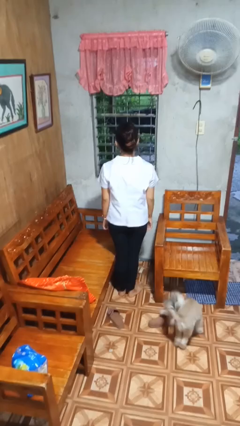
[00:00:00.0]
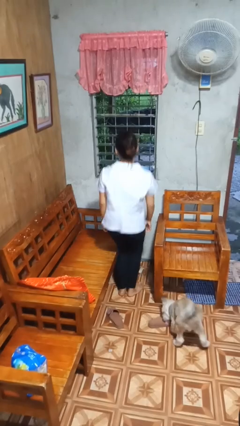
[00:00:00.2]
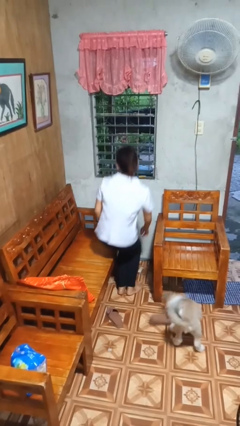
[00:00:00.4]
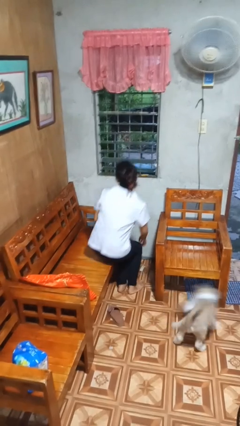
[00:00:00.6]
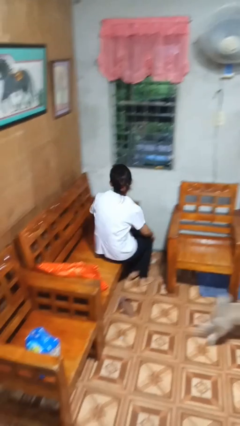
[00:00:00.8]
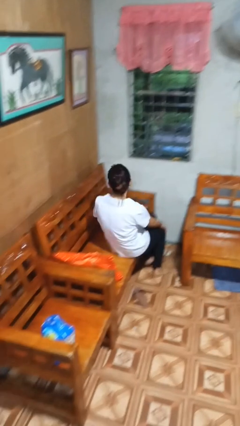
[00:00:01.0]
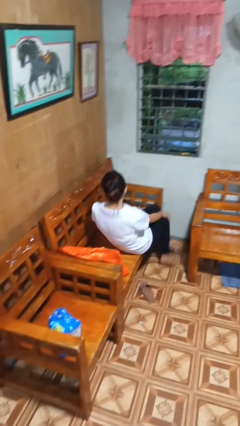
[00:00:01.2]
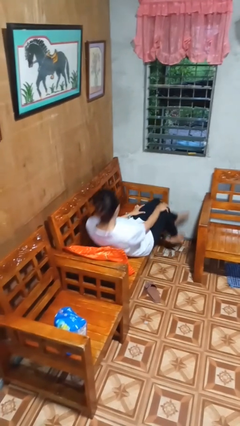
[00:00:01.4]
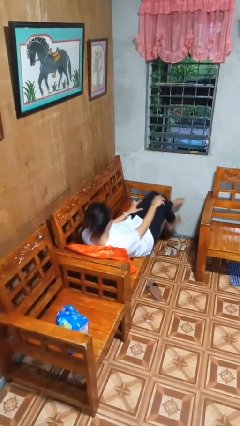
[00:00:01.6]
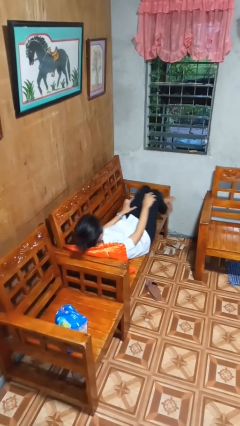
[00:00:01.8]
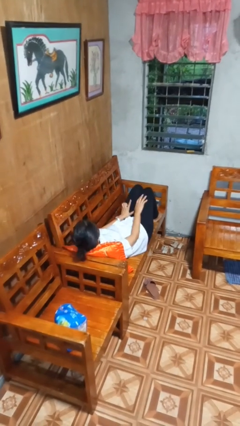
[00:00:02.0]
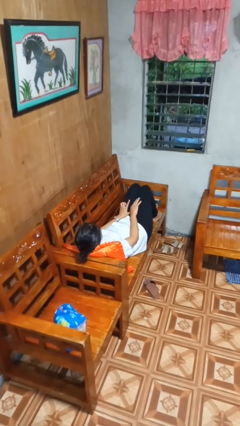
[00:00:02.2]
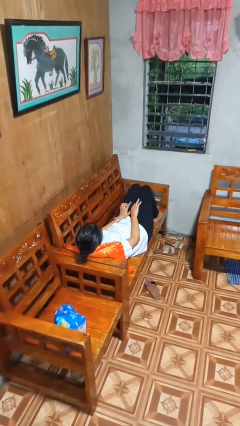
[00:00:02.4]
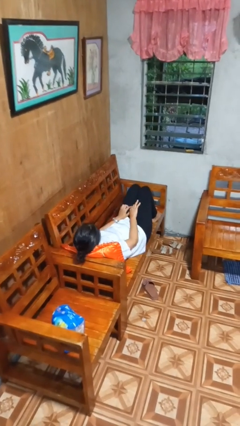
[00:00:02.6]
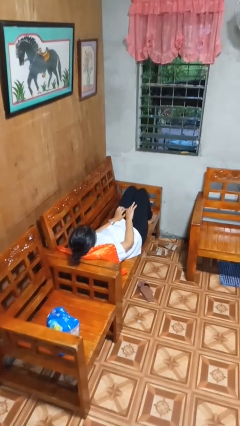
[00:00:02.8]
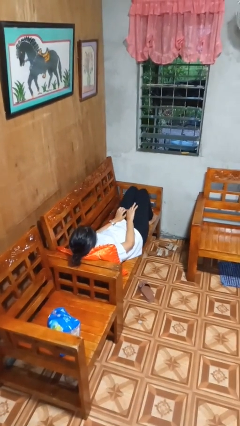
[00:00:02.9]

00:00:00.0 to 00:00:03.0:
person lies down on couch

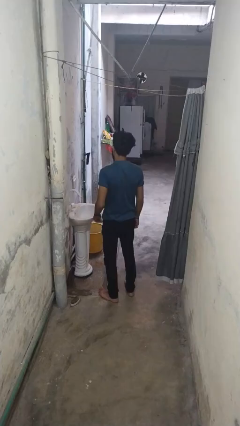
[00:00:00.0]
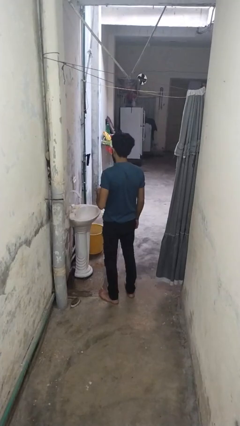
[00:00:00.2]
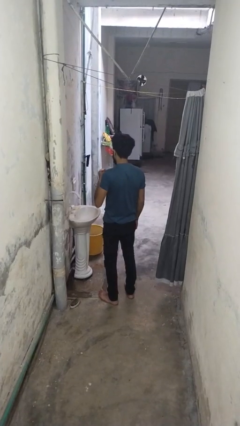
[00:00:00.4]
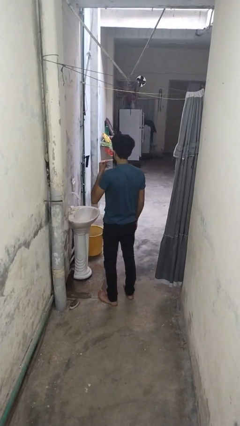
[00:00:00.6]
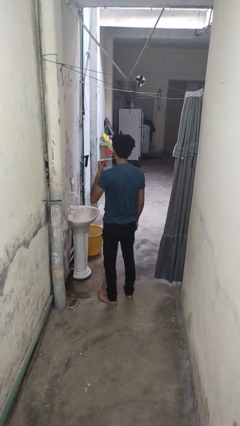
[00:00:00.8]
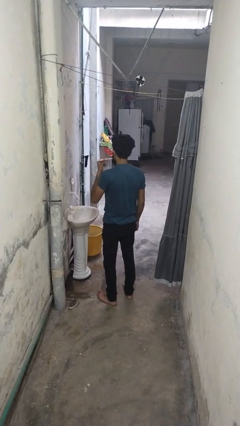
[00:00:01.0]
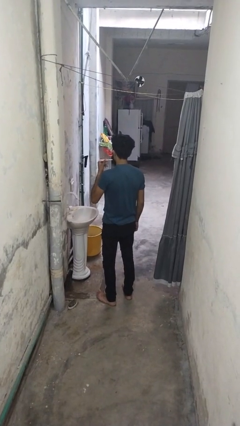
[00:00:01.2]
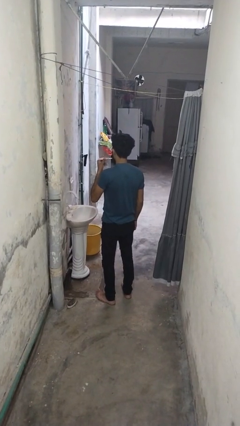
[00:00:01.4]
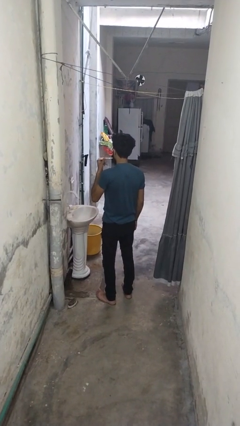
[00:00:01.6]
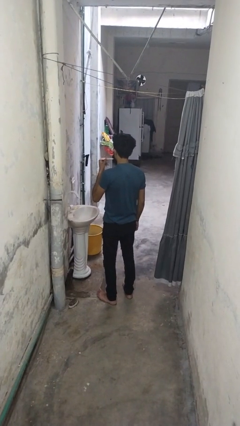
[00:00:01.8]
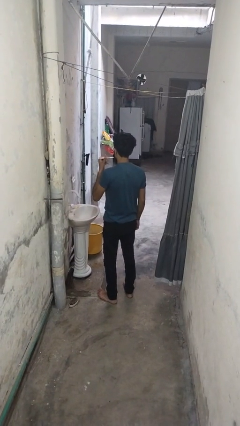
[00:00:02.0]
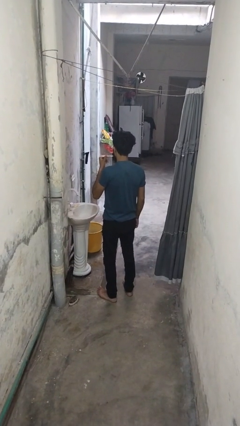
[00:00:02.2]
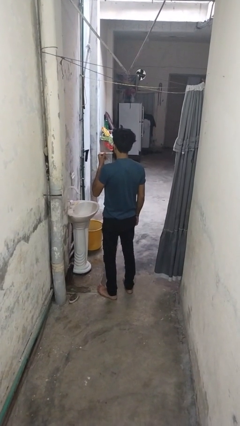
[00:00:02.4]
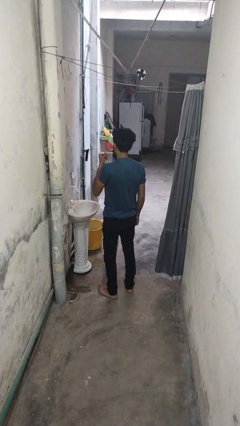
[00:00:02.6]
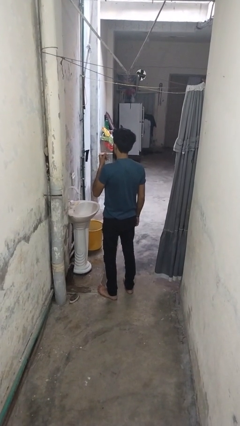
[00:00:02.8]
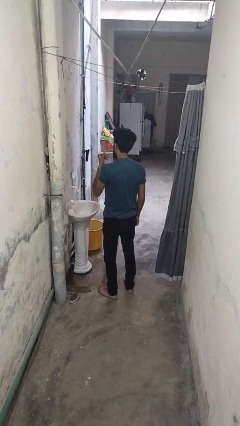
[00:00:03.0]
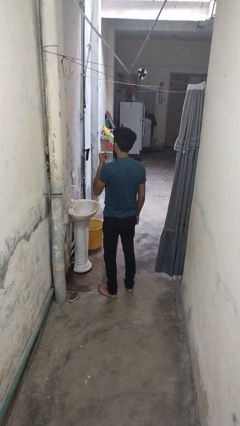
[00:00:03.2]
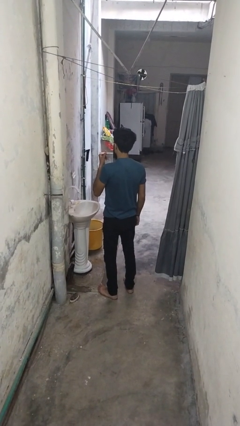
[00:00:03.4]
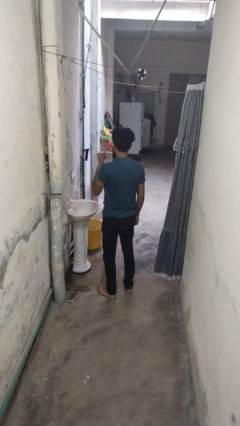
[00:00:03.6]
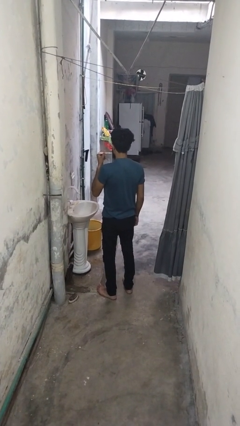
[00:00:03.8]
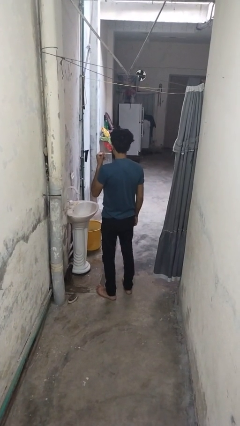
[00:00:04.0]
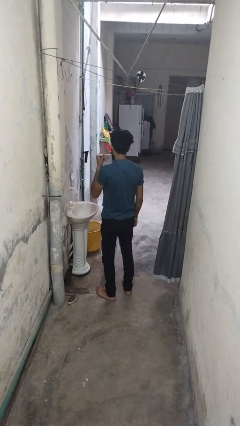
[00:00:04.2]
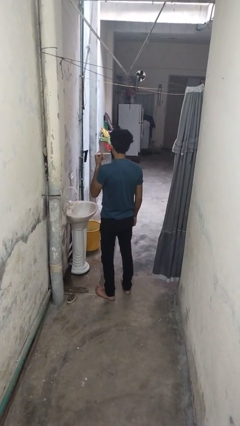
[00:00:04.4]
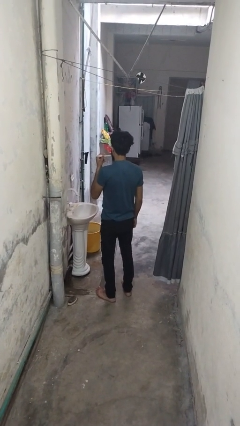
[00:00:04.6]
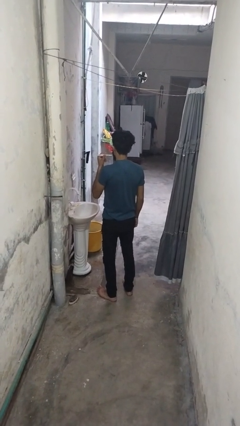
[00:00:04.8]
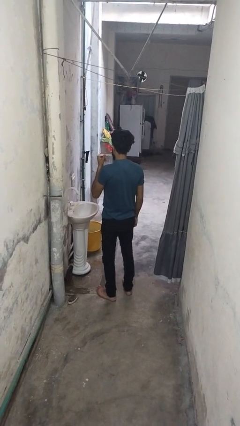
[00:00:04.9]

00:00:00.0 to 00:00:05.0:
person brushes teeth

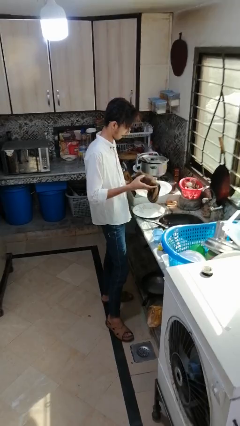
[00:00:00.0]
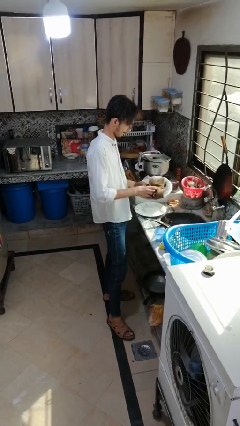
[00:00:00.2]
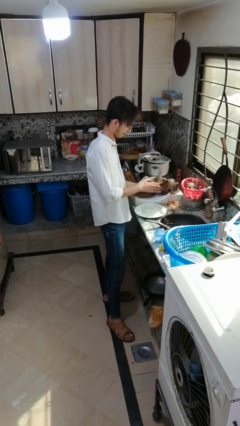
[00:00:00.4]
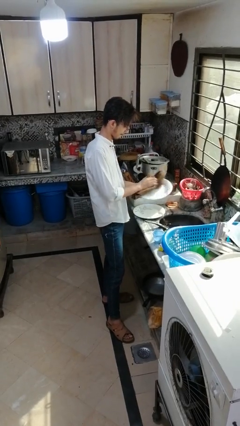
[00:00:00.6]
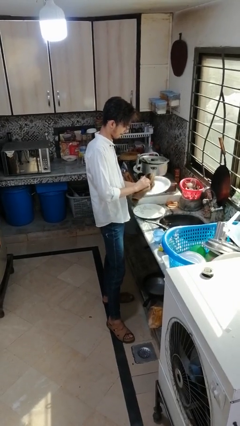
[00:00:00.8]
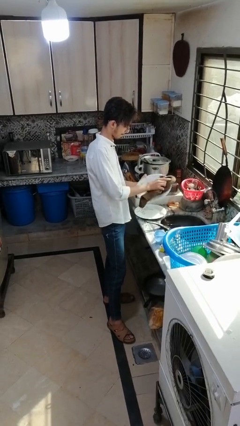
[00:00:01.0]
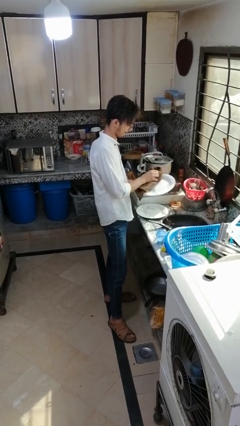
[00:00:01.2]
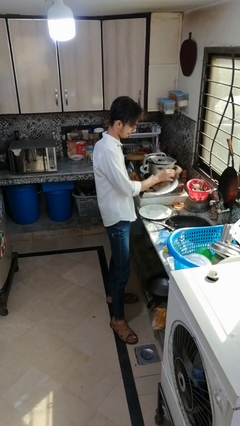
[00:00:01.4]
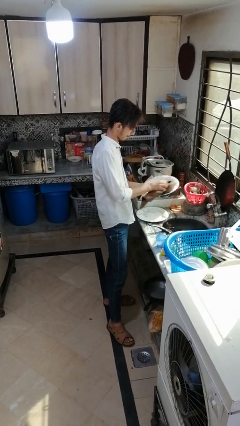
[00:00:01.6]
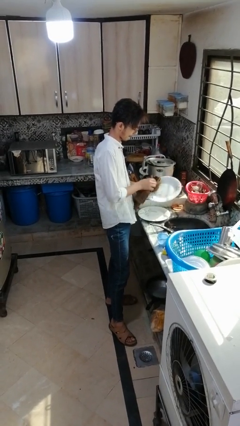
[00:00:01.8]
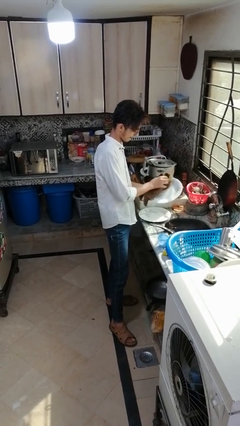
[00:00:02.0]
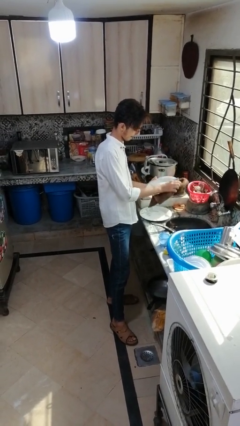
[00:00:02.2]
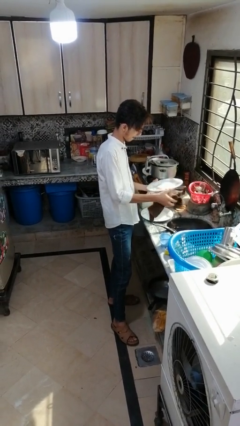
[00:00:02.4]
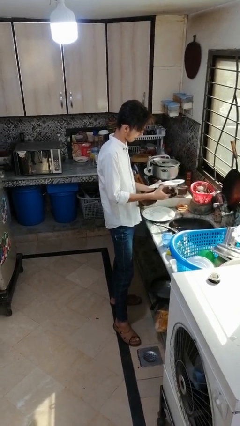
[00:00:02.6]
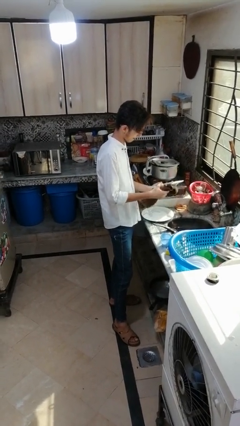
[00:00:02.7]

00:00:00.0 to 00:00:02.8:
person dries dish

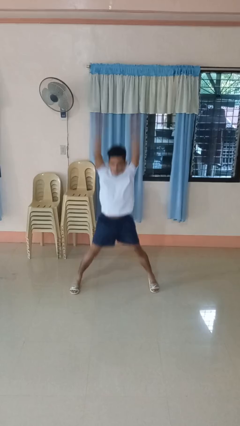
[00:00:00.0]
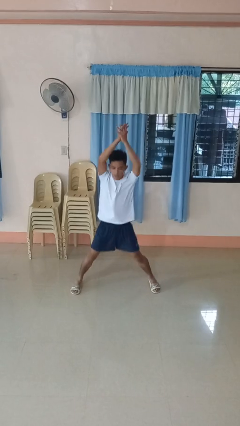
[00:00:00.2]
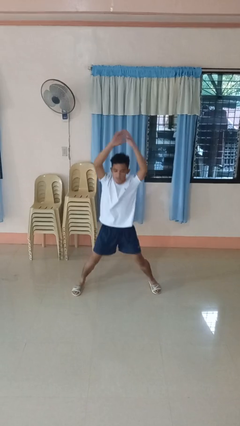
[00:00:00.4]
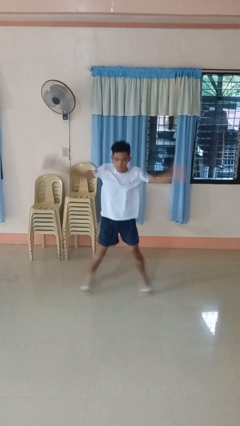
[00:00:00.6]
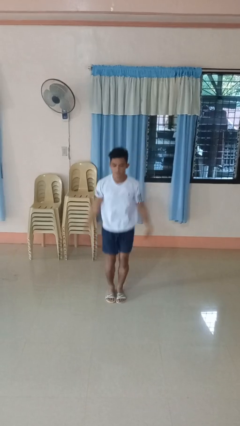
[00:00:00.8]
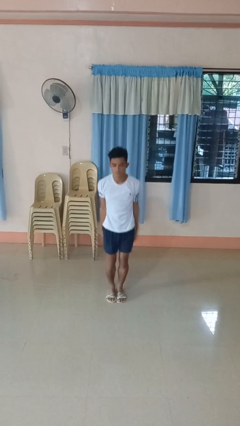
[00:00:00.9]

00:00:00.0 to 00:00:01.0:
person exercises with jumping jacks

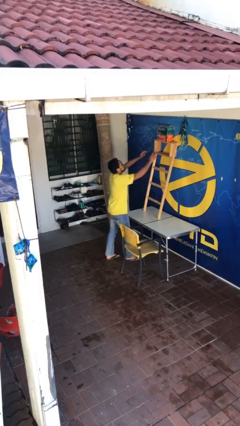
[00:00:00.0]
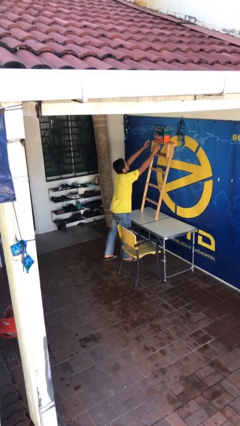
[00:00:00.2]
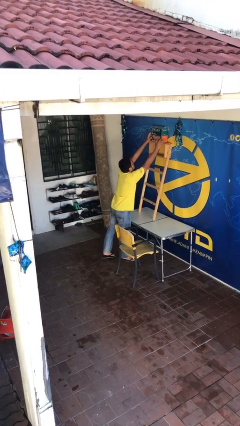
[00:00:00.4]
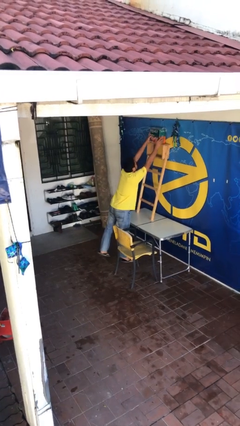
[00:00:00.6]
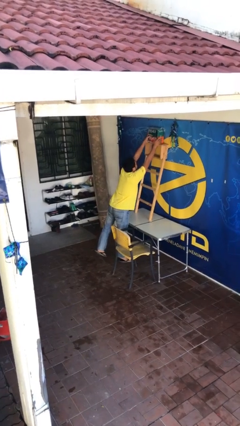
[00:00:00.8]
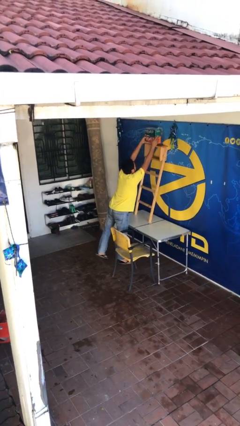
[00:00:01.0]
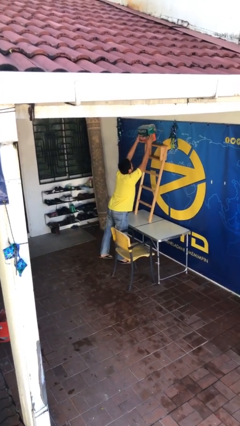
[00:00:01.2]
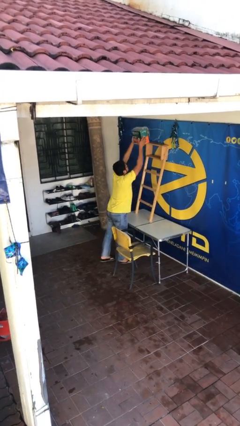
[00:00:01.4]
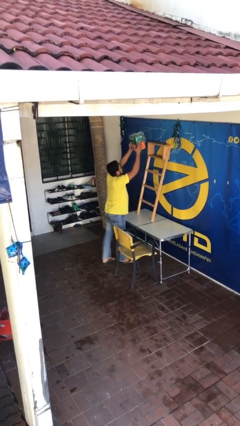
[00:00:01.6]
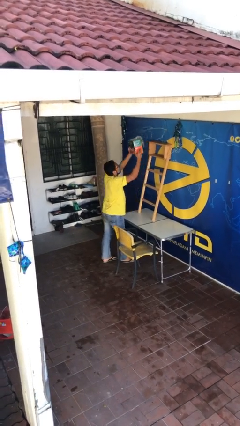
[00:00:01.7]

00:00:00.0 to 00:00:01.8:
person picks up object from shelf

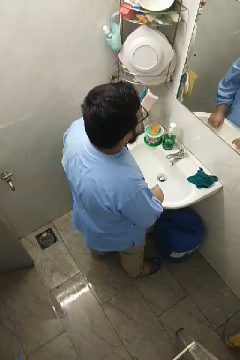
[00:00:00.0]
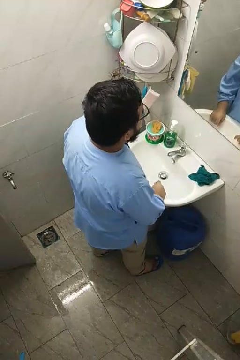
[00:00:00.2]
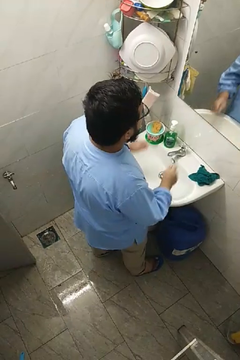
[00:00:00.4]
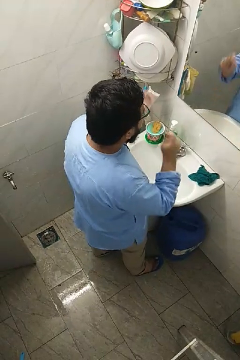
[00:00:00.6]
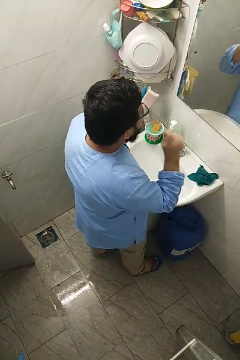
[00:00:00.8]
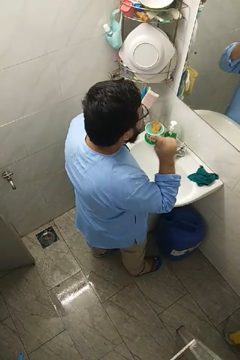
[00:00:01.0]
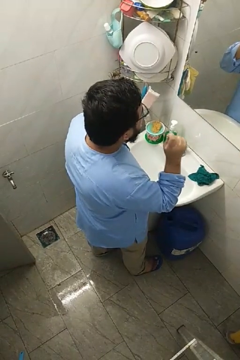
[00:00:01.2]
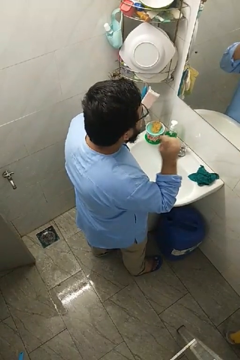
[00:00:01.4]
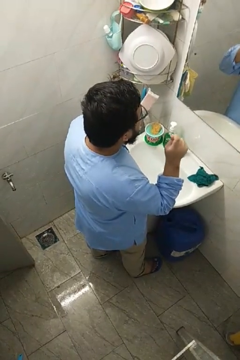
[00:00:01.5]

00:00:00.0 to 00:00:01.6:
person flosses

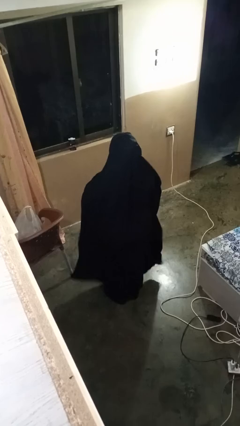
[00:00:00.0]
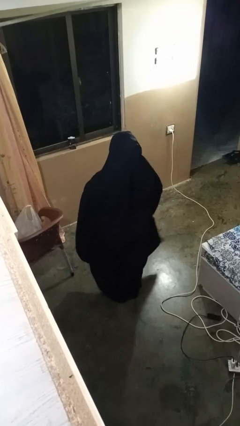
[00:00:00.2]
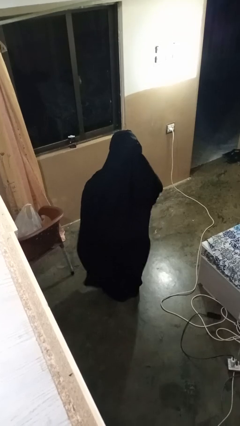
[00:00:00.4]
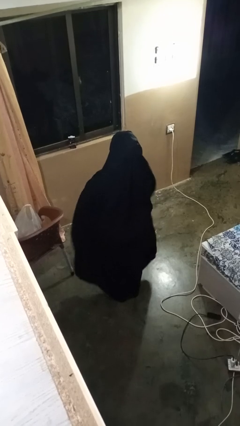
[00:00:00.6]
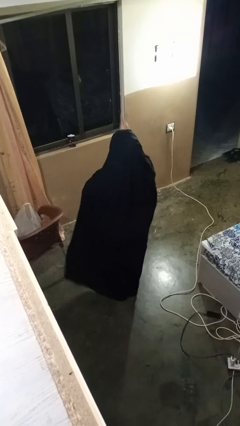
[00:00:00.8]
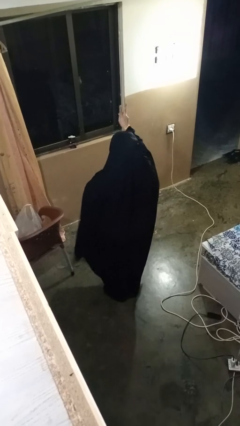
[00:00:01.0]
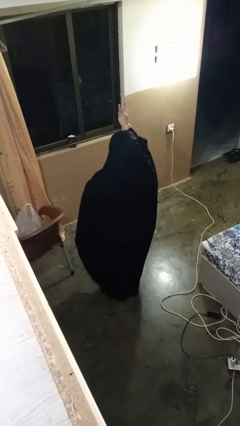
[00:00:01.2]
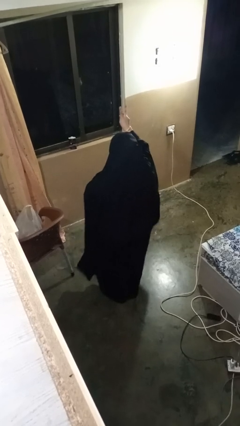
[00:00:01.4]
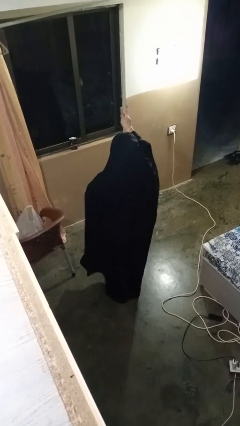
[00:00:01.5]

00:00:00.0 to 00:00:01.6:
person gestures peace

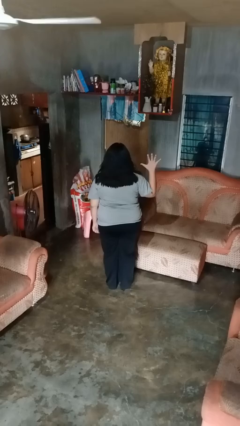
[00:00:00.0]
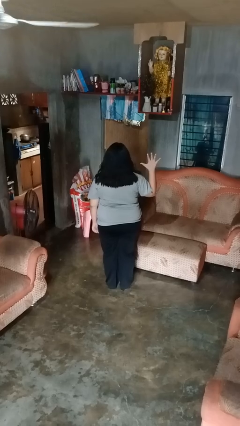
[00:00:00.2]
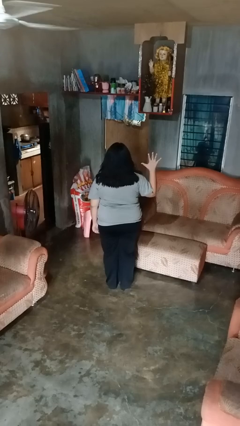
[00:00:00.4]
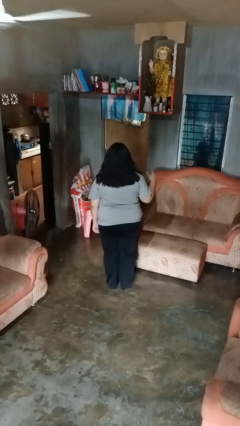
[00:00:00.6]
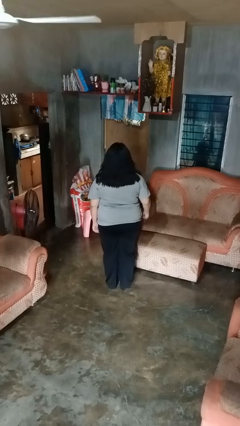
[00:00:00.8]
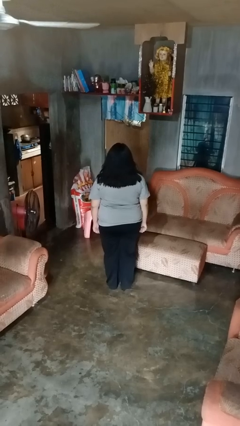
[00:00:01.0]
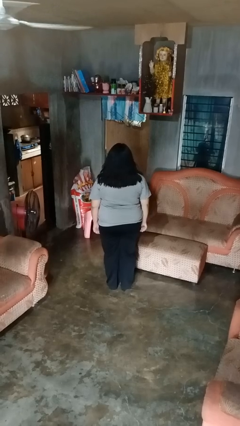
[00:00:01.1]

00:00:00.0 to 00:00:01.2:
person gestures number five
